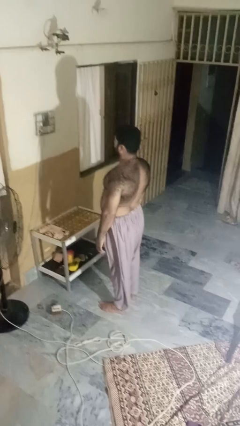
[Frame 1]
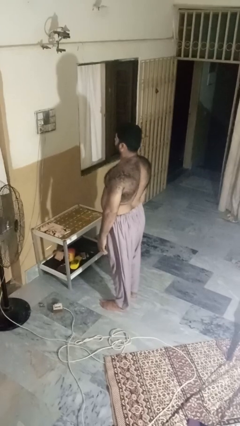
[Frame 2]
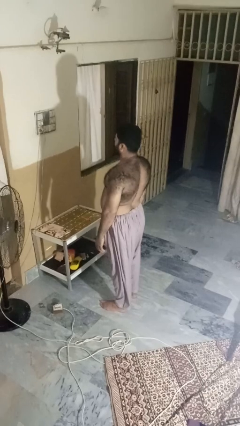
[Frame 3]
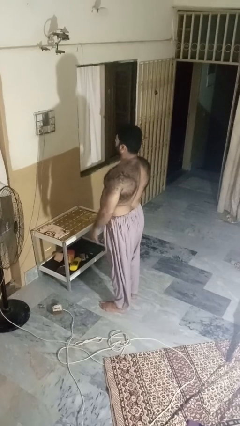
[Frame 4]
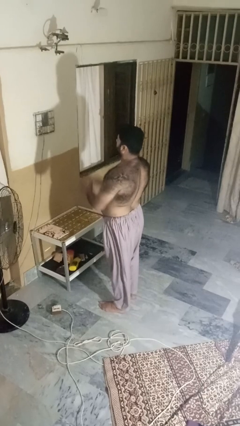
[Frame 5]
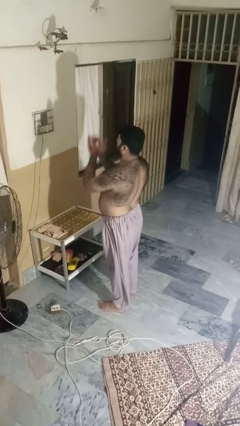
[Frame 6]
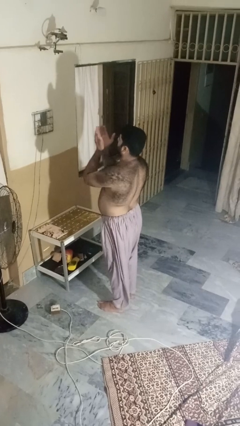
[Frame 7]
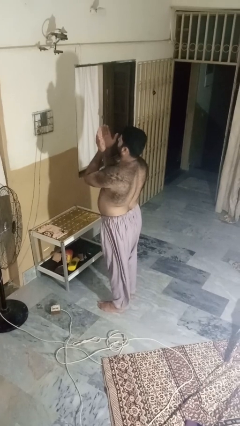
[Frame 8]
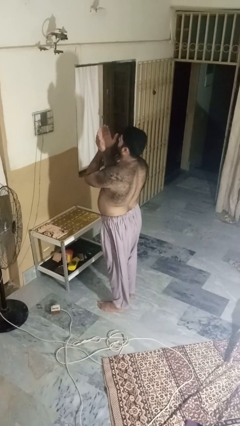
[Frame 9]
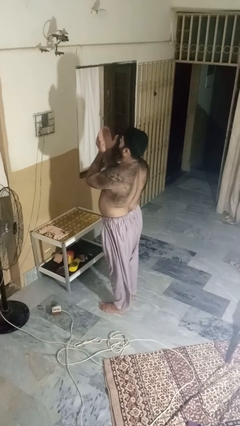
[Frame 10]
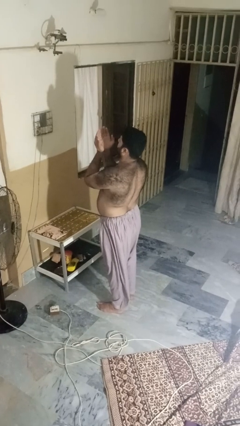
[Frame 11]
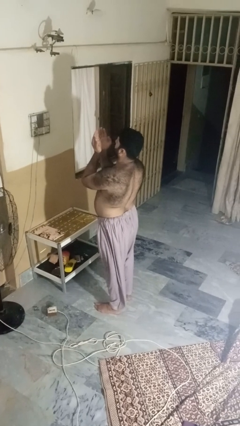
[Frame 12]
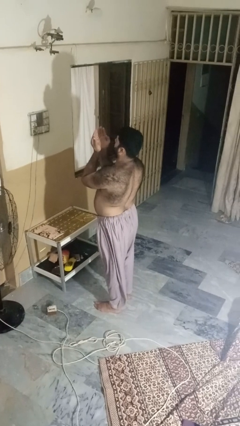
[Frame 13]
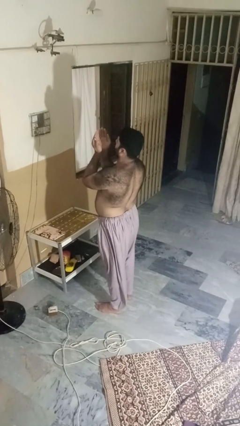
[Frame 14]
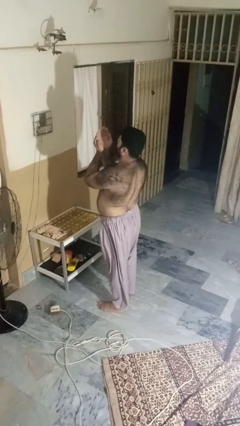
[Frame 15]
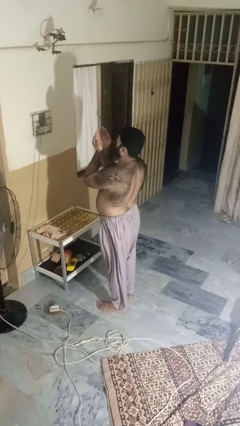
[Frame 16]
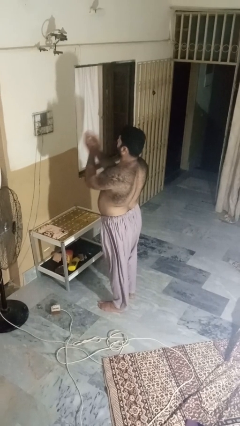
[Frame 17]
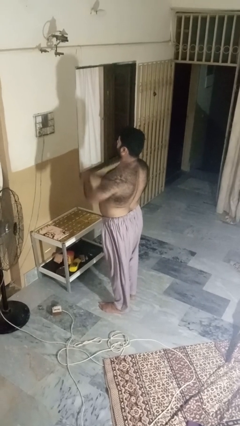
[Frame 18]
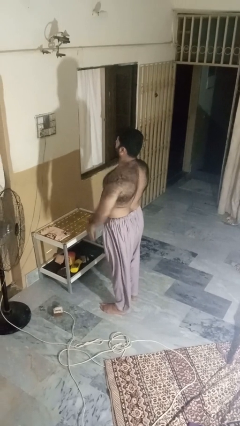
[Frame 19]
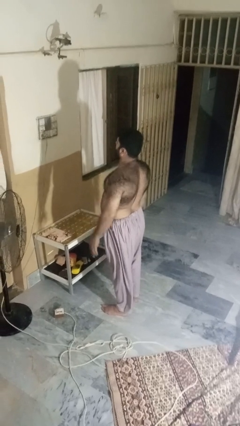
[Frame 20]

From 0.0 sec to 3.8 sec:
person prays

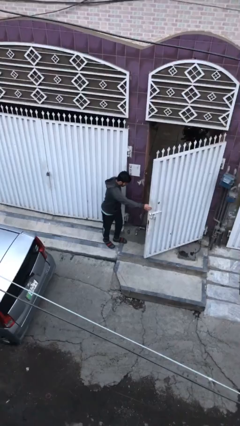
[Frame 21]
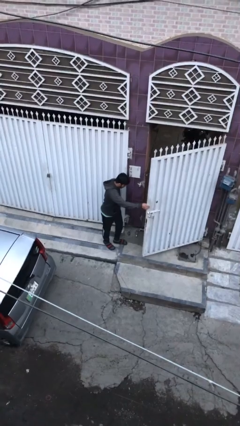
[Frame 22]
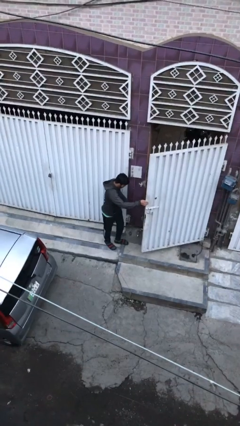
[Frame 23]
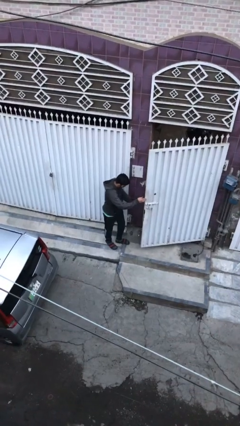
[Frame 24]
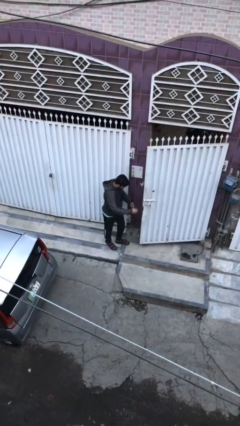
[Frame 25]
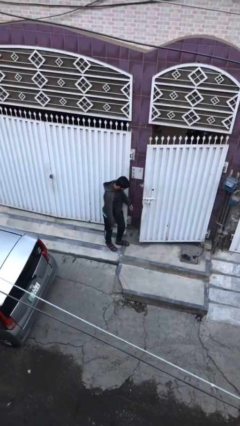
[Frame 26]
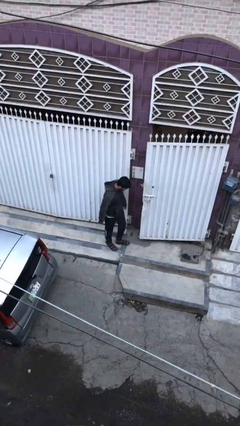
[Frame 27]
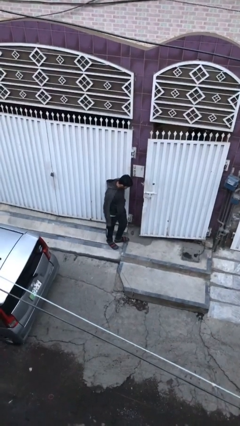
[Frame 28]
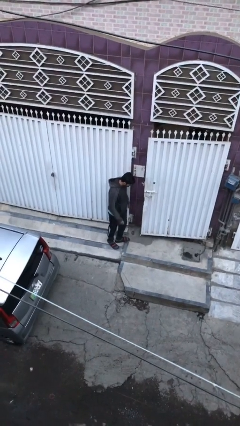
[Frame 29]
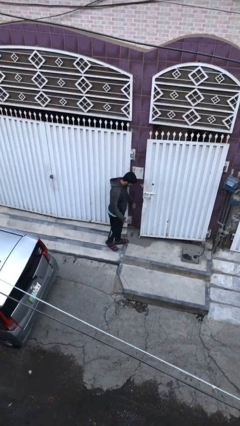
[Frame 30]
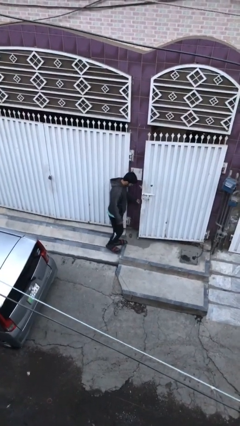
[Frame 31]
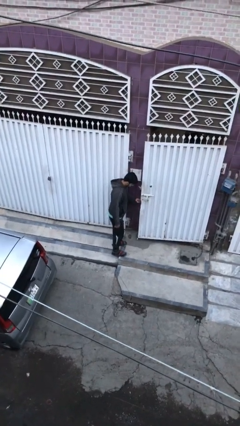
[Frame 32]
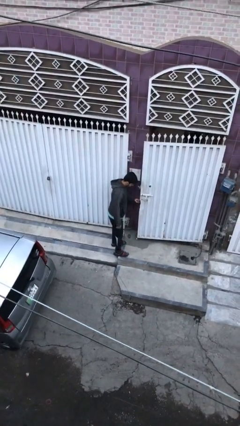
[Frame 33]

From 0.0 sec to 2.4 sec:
person closes facility door

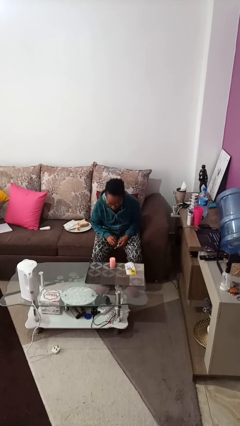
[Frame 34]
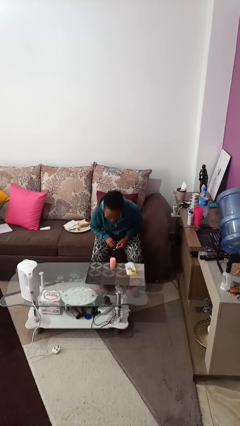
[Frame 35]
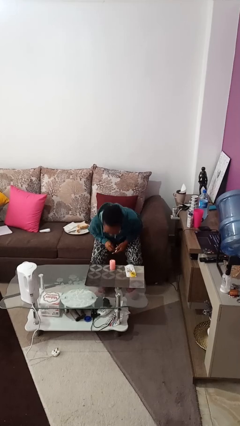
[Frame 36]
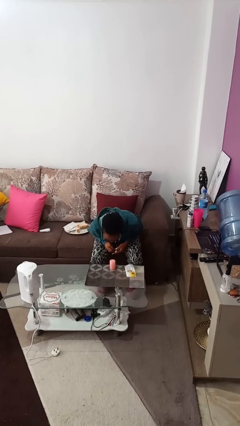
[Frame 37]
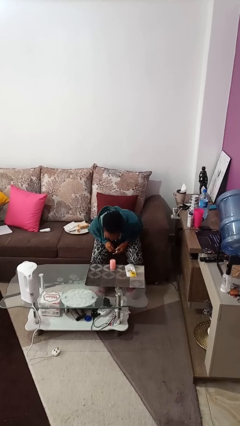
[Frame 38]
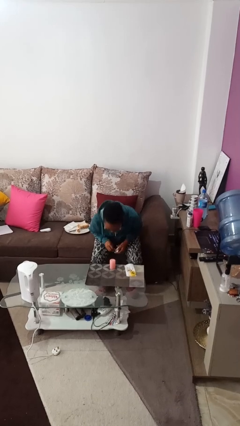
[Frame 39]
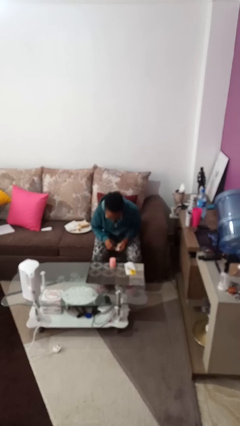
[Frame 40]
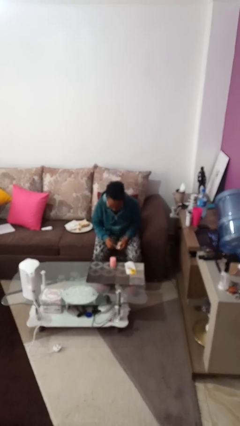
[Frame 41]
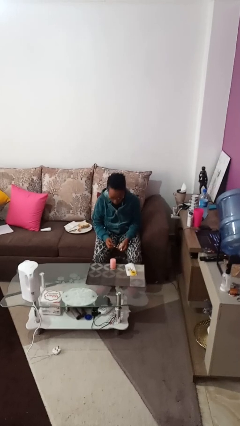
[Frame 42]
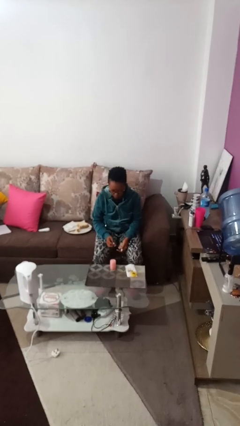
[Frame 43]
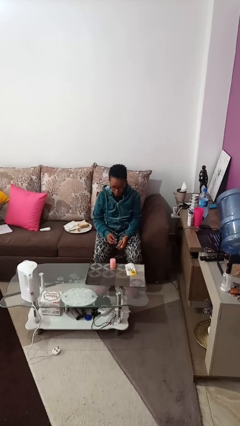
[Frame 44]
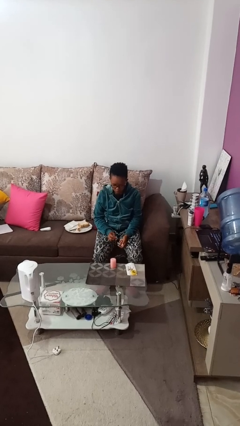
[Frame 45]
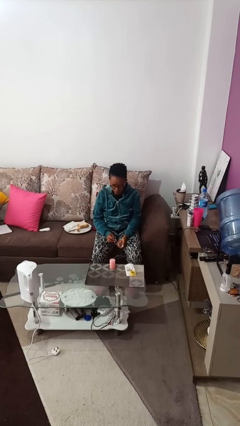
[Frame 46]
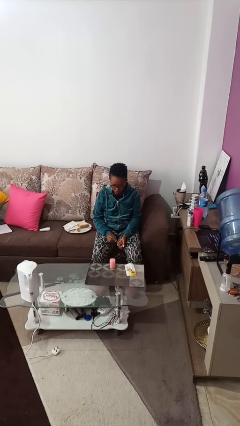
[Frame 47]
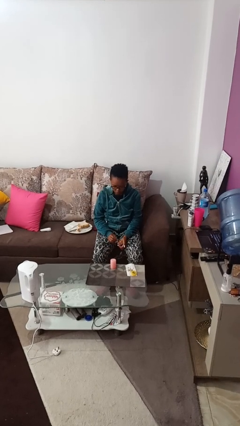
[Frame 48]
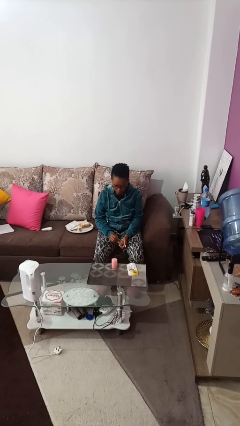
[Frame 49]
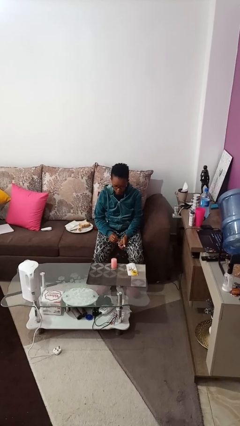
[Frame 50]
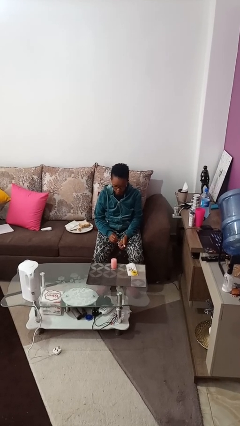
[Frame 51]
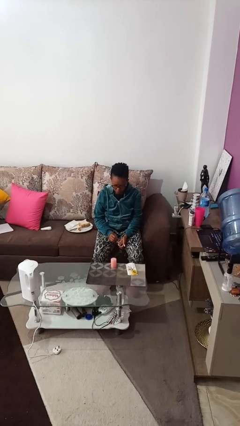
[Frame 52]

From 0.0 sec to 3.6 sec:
person extinguishes candle

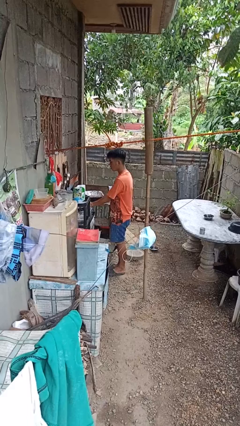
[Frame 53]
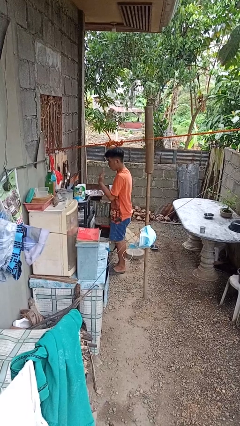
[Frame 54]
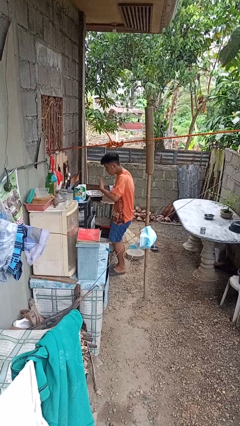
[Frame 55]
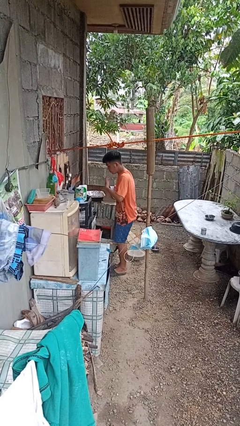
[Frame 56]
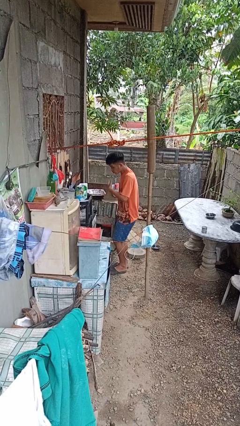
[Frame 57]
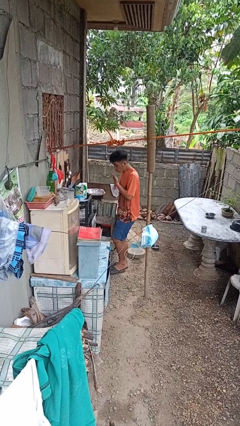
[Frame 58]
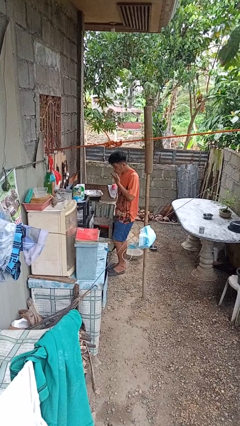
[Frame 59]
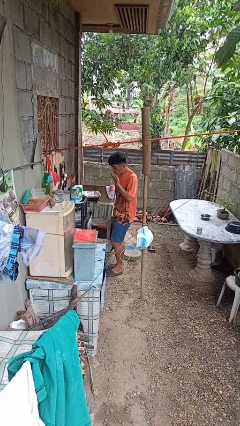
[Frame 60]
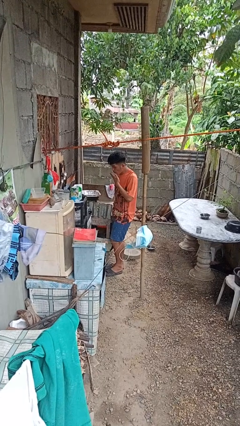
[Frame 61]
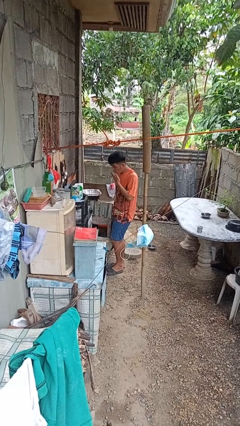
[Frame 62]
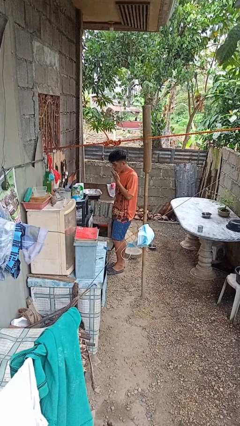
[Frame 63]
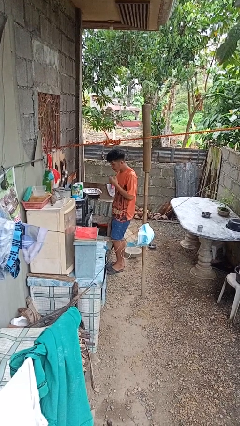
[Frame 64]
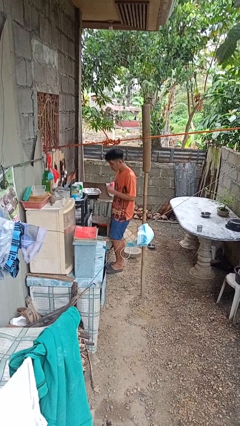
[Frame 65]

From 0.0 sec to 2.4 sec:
person burns hand

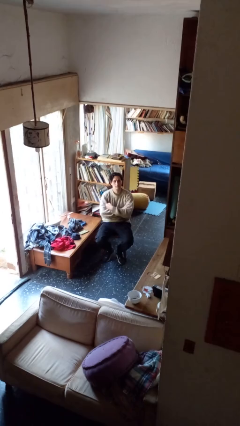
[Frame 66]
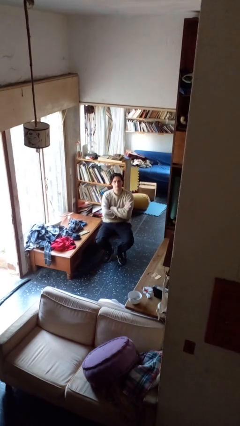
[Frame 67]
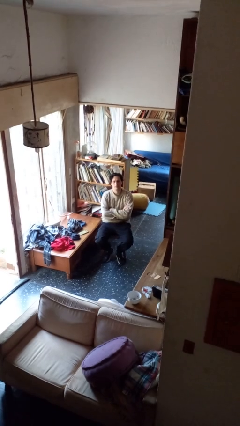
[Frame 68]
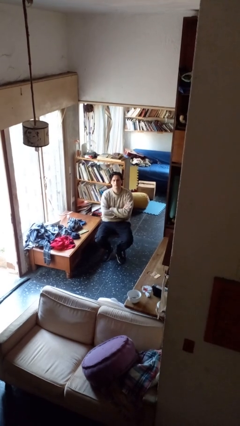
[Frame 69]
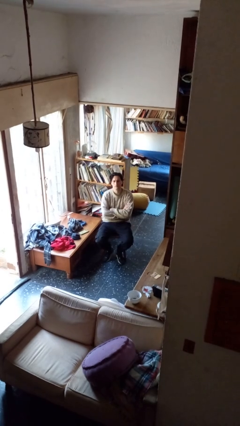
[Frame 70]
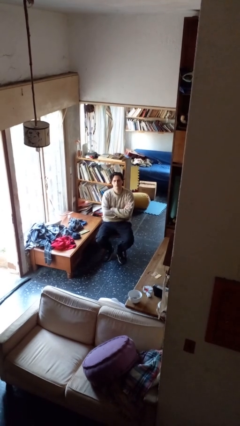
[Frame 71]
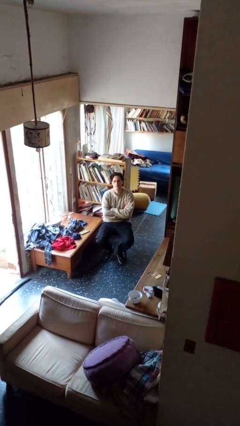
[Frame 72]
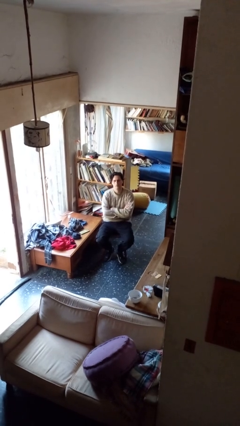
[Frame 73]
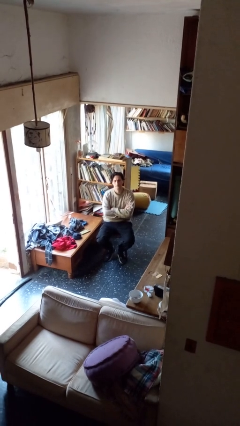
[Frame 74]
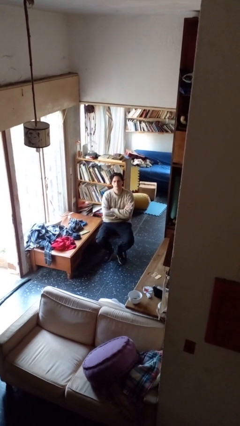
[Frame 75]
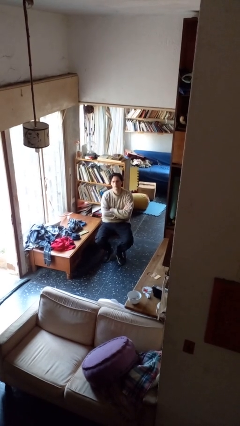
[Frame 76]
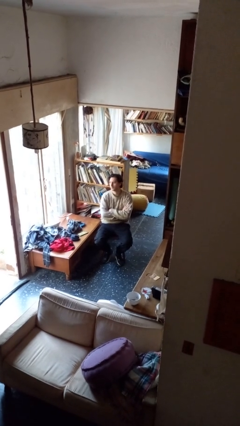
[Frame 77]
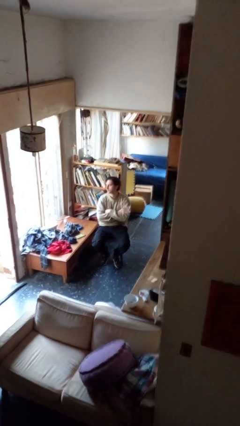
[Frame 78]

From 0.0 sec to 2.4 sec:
person crosses arms

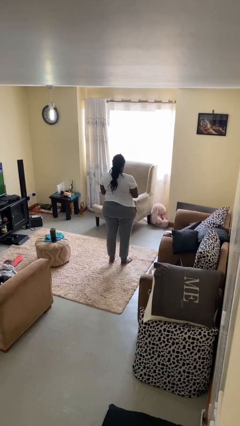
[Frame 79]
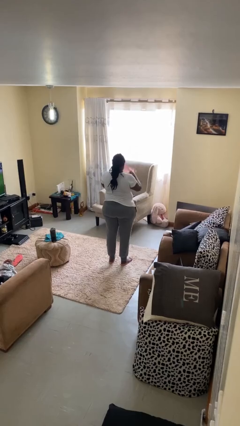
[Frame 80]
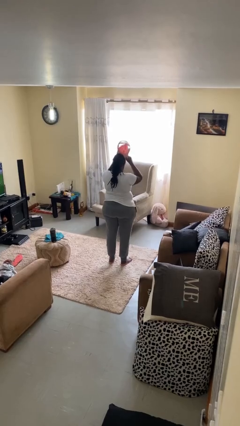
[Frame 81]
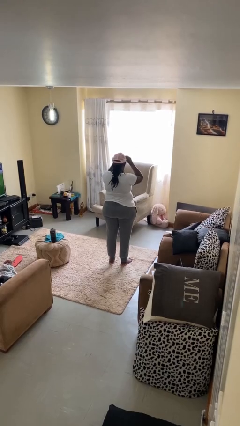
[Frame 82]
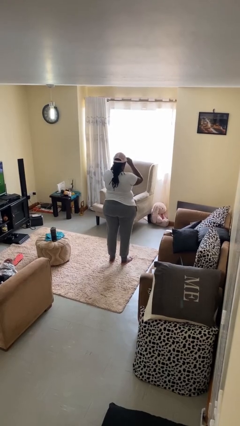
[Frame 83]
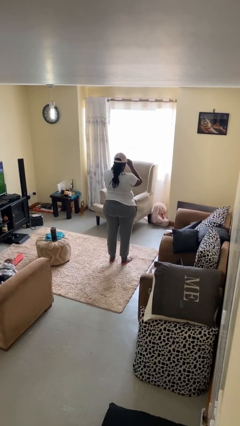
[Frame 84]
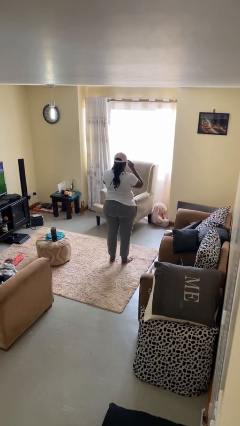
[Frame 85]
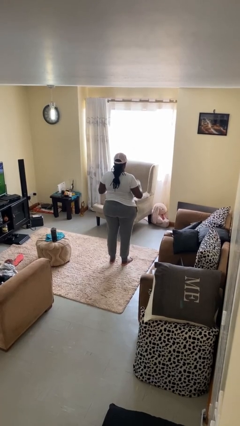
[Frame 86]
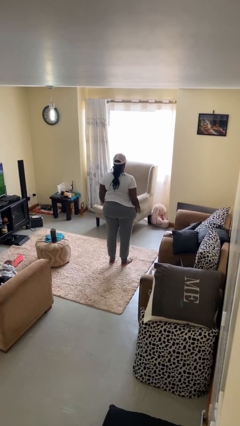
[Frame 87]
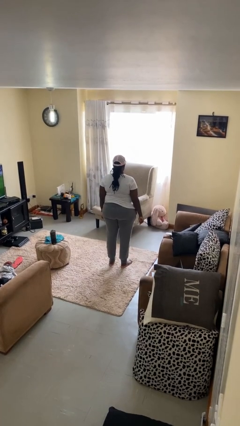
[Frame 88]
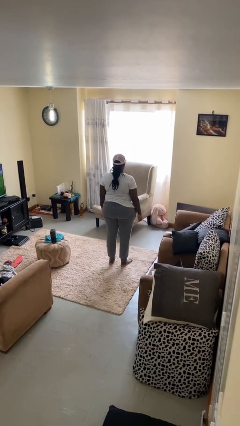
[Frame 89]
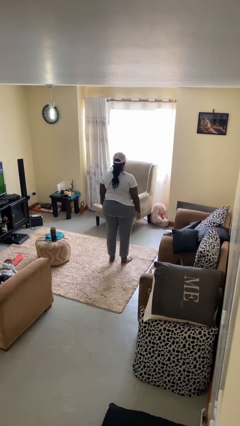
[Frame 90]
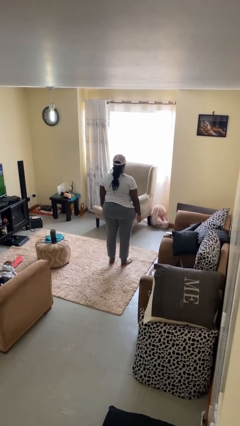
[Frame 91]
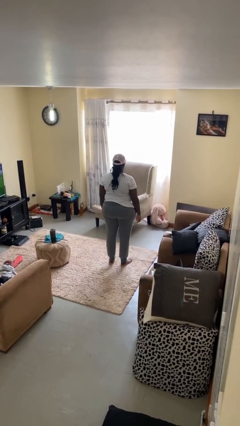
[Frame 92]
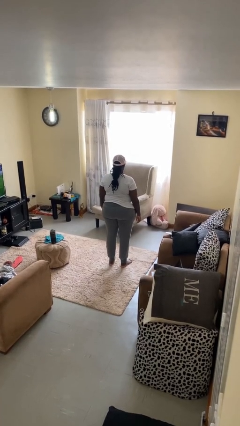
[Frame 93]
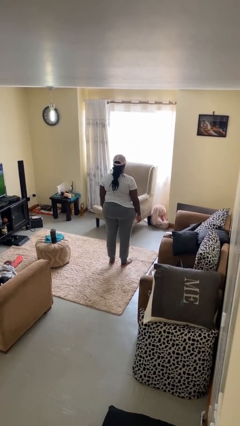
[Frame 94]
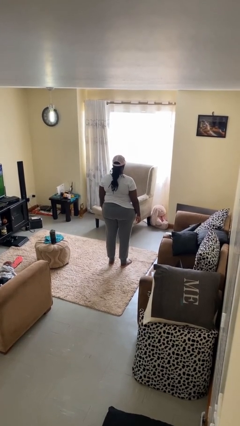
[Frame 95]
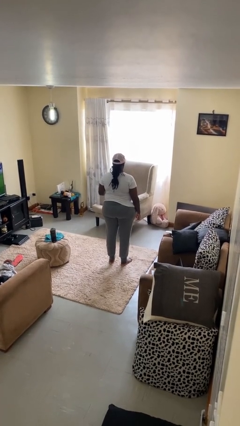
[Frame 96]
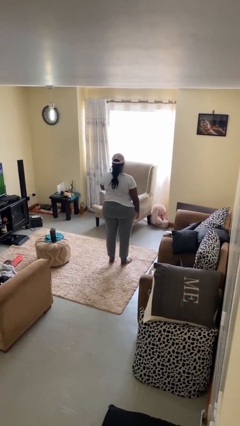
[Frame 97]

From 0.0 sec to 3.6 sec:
person puts on hat
